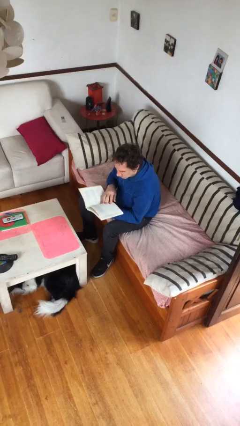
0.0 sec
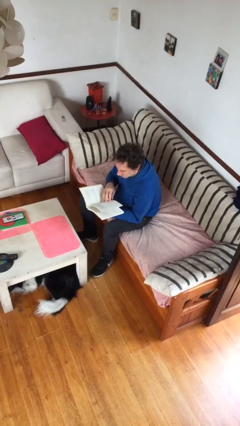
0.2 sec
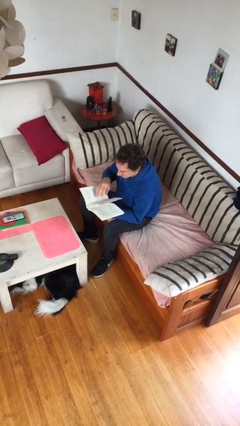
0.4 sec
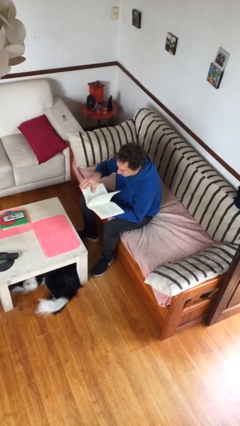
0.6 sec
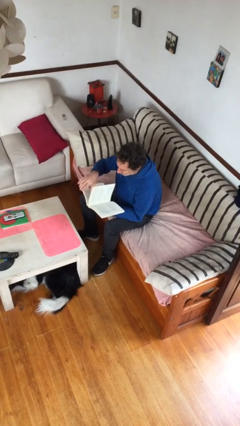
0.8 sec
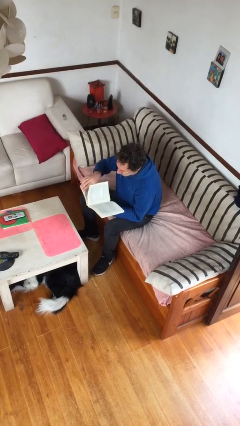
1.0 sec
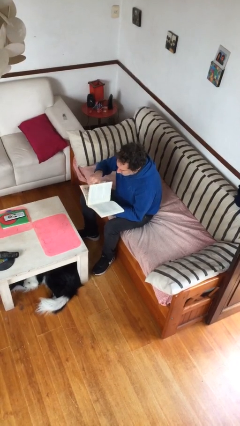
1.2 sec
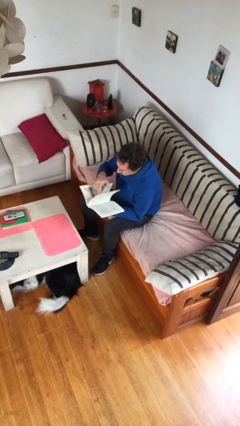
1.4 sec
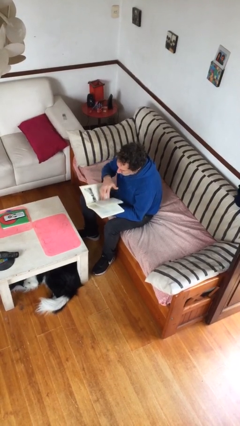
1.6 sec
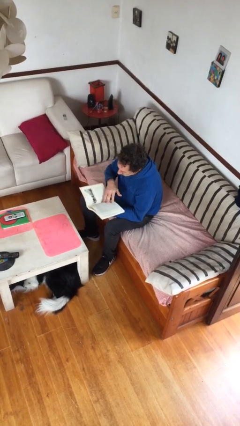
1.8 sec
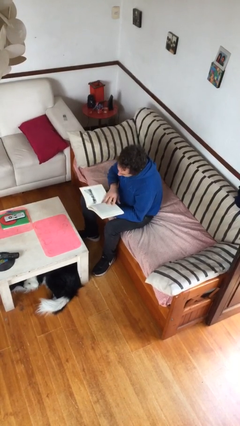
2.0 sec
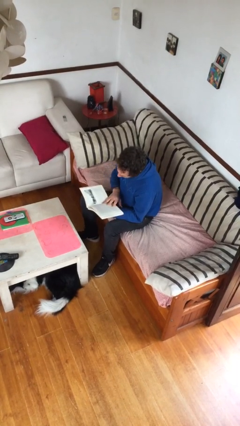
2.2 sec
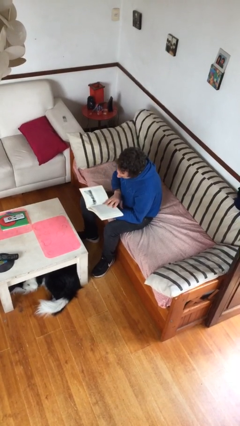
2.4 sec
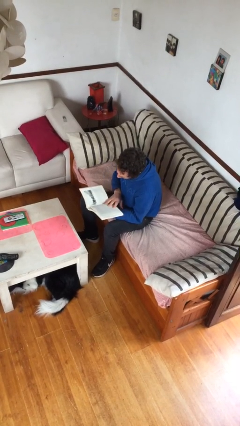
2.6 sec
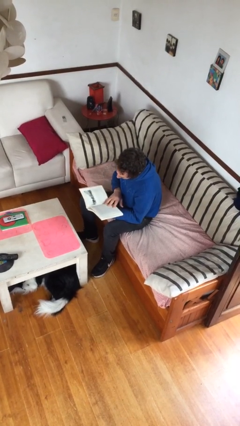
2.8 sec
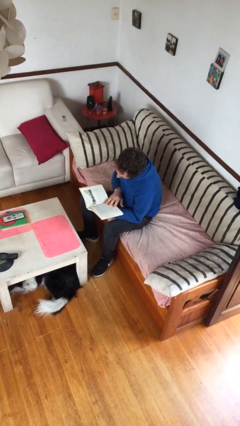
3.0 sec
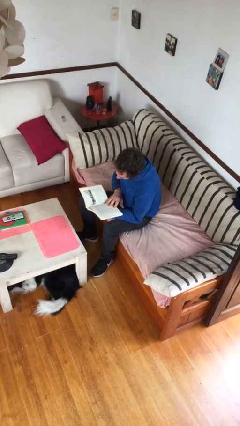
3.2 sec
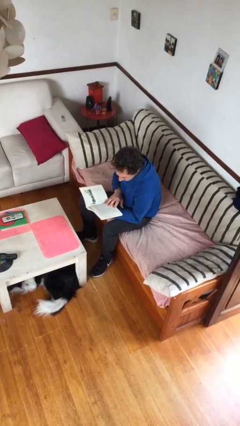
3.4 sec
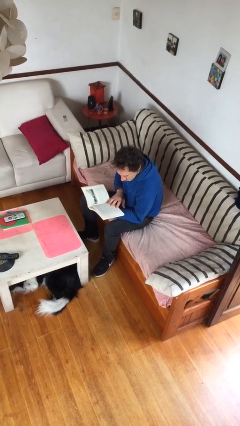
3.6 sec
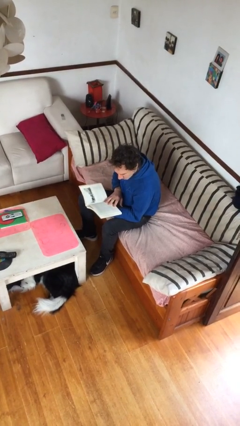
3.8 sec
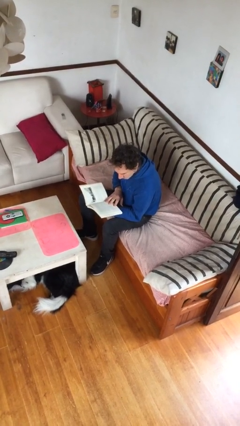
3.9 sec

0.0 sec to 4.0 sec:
person reads document

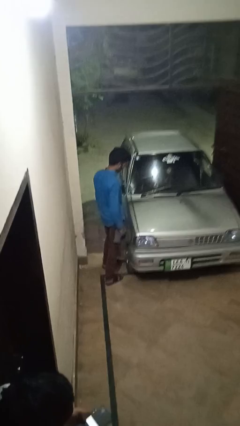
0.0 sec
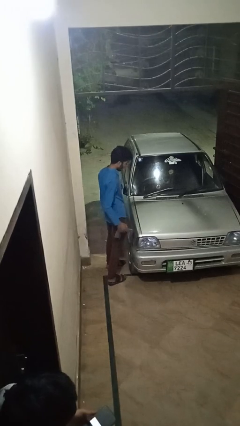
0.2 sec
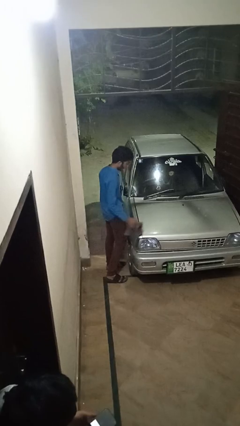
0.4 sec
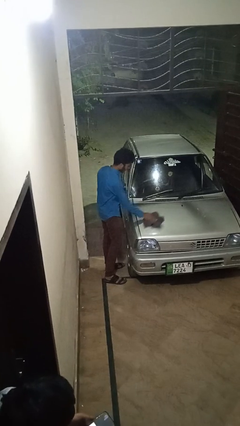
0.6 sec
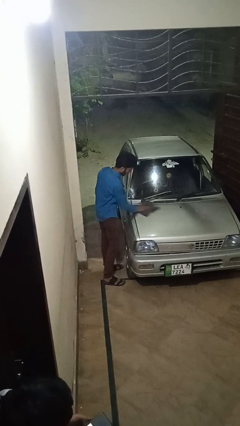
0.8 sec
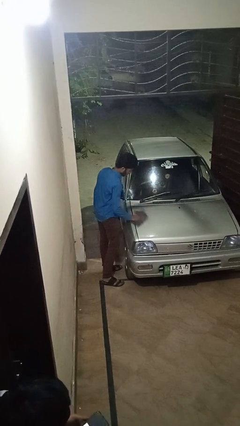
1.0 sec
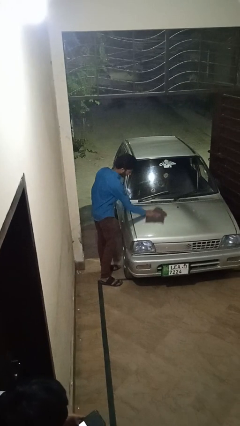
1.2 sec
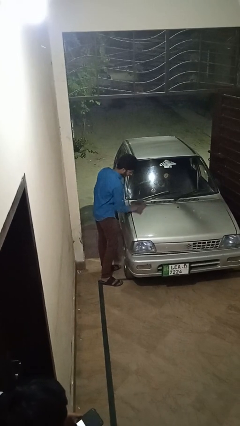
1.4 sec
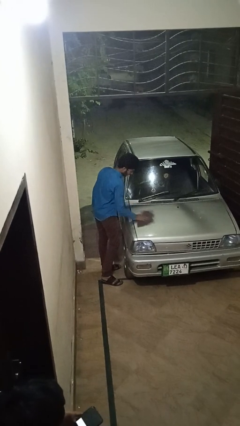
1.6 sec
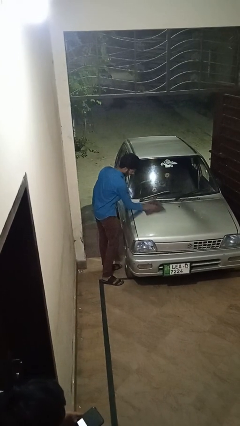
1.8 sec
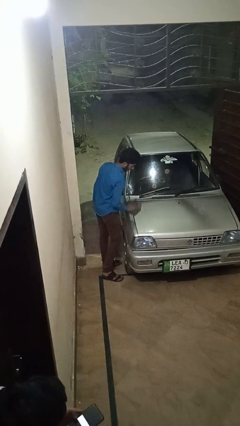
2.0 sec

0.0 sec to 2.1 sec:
person polishes car with rag

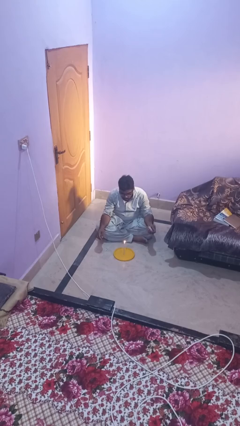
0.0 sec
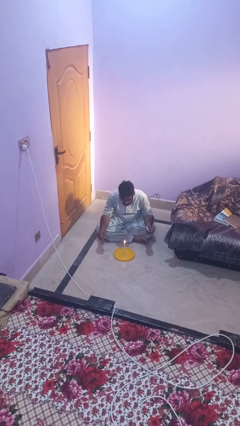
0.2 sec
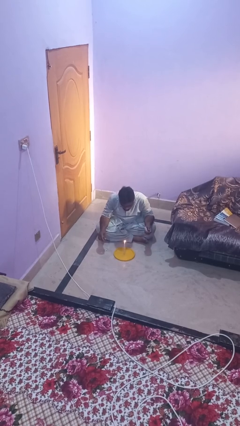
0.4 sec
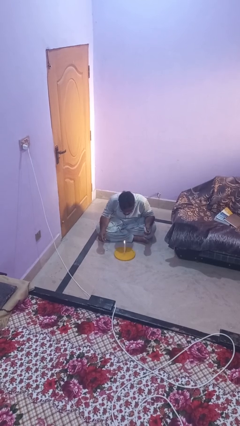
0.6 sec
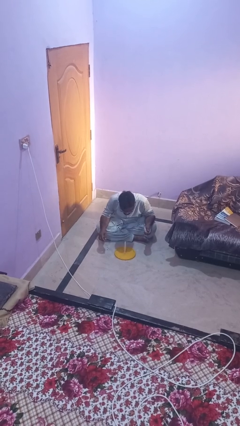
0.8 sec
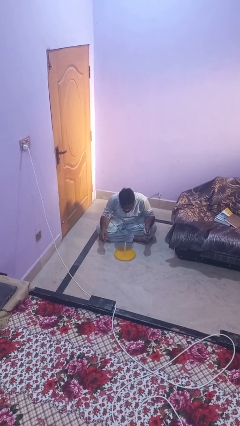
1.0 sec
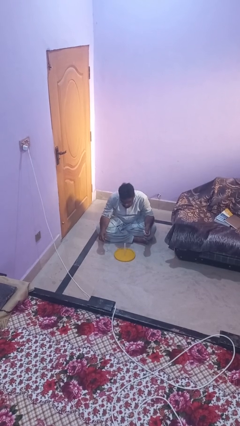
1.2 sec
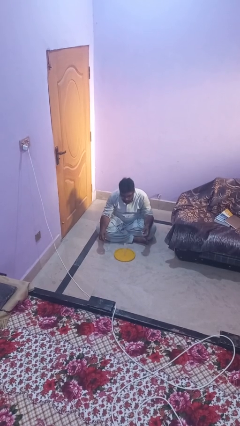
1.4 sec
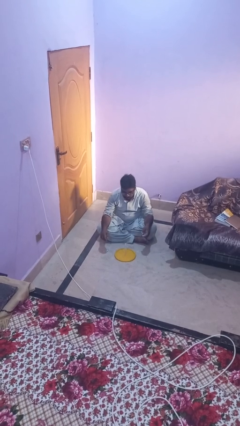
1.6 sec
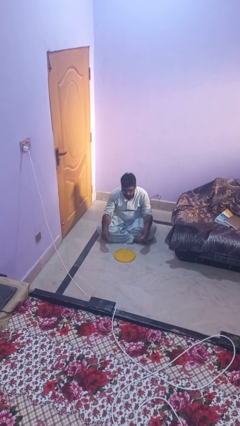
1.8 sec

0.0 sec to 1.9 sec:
person extinguishes candle

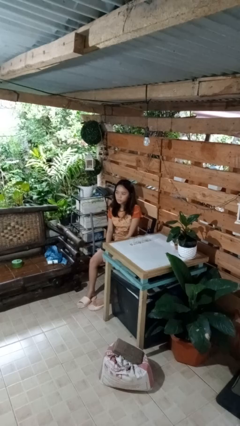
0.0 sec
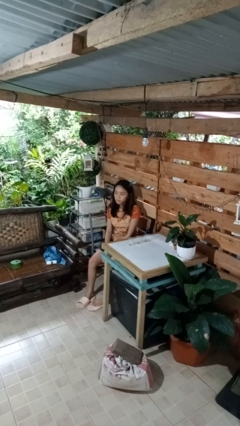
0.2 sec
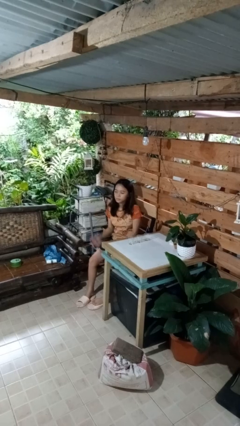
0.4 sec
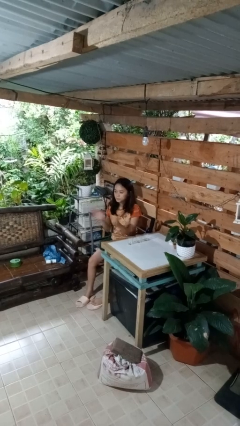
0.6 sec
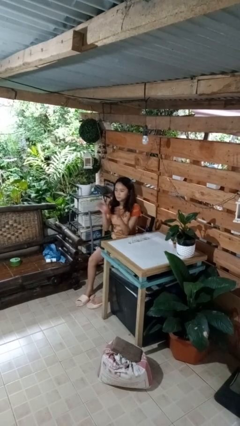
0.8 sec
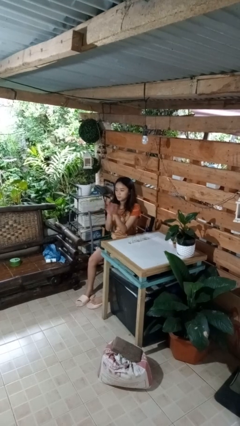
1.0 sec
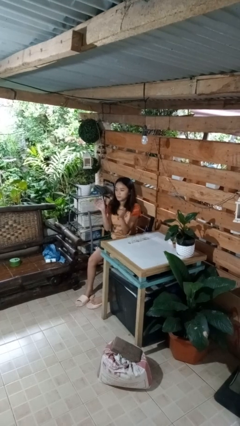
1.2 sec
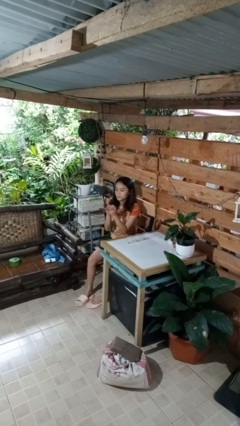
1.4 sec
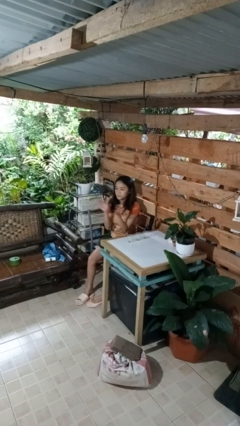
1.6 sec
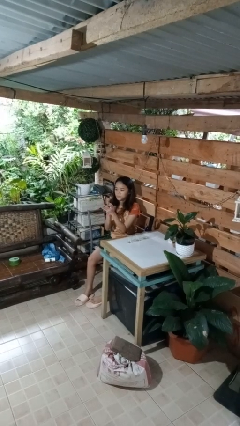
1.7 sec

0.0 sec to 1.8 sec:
person claps hands

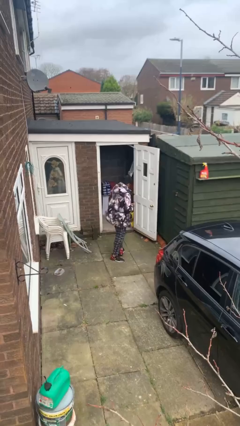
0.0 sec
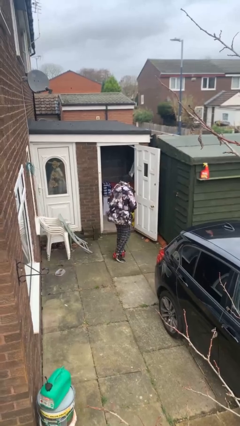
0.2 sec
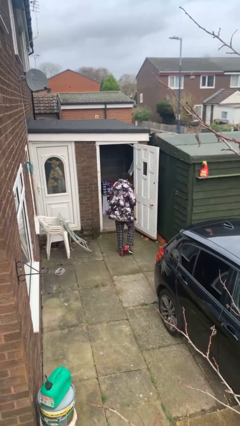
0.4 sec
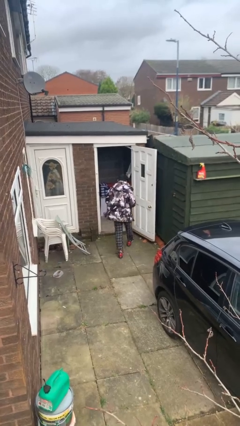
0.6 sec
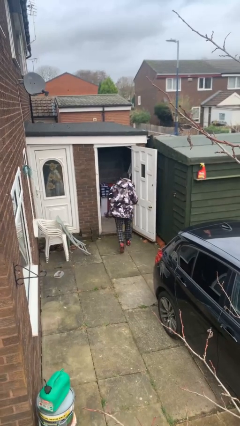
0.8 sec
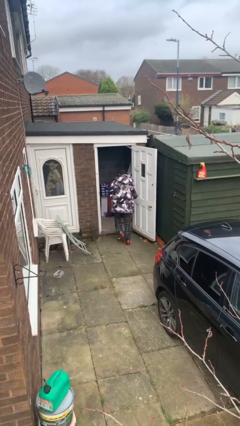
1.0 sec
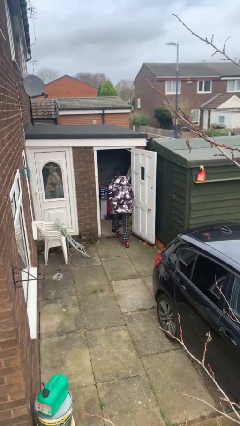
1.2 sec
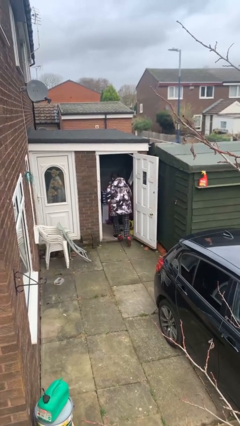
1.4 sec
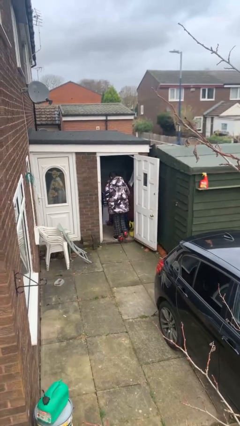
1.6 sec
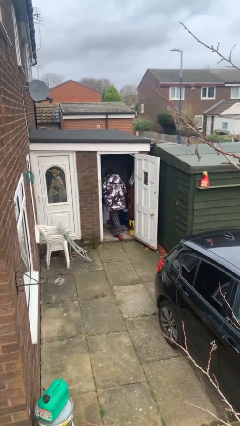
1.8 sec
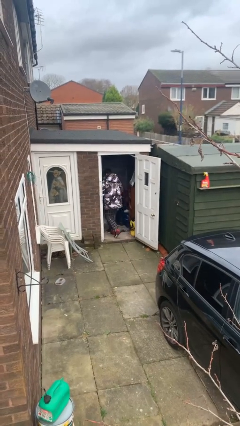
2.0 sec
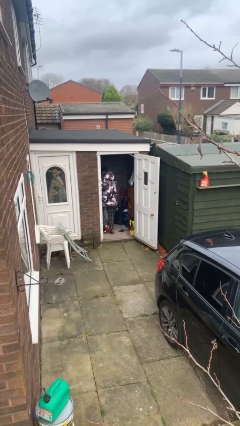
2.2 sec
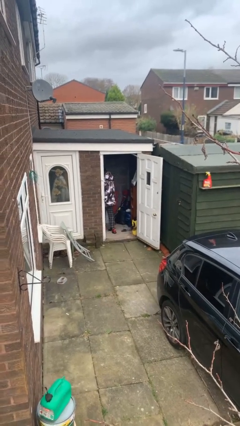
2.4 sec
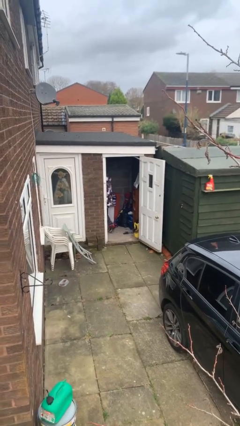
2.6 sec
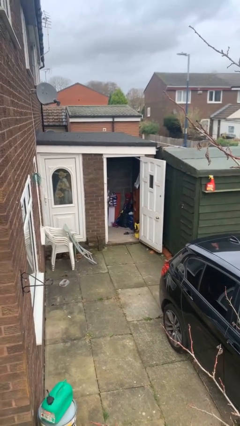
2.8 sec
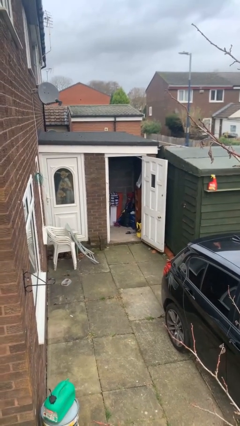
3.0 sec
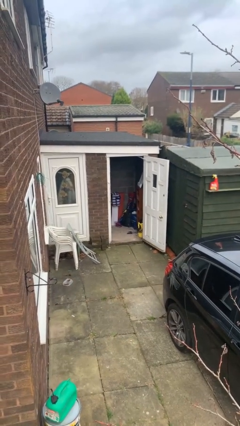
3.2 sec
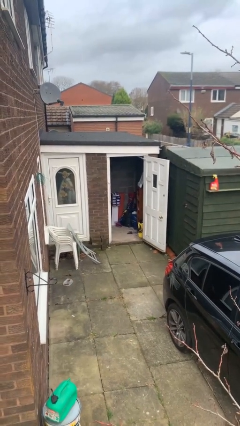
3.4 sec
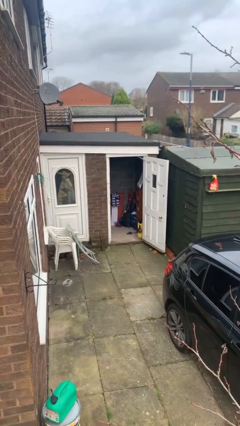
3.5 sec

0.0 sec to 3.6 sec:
person exits scene through structure

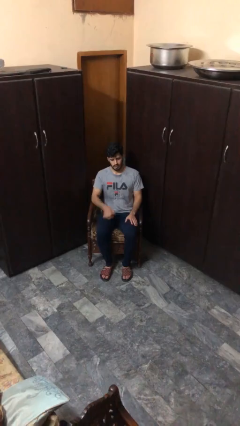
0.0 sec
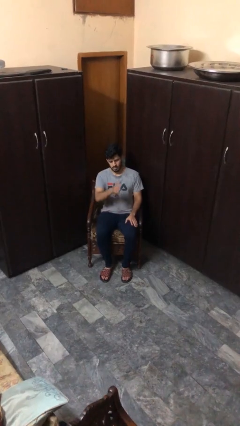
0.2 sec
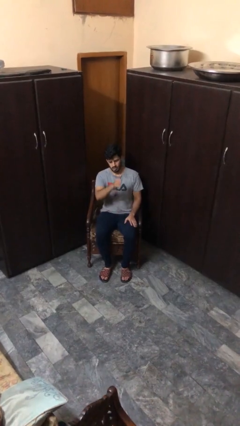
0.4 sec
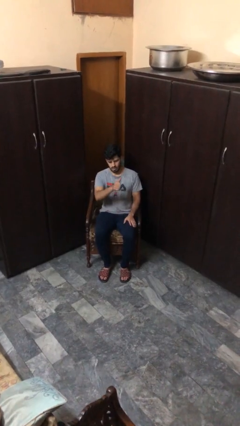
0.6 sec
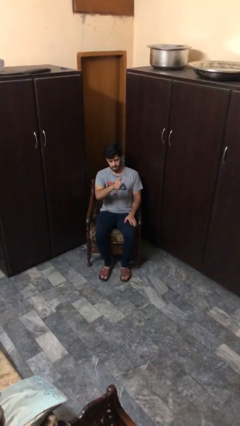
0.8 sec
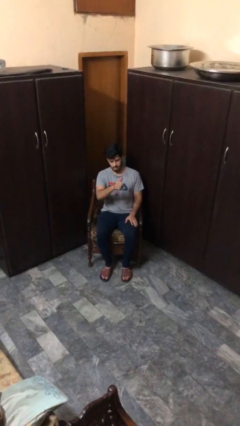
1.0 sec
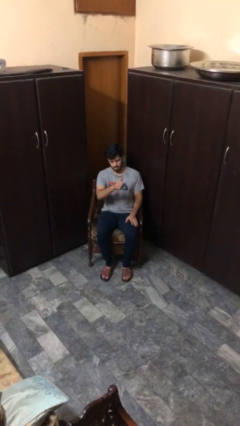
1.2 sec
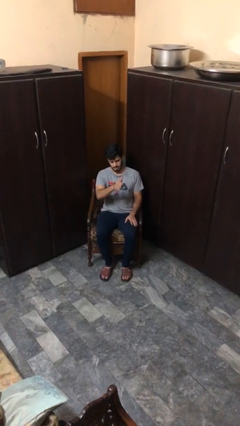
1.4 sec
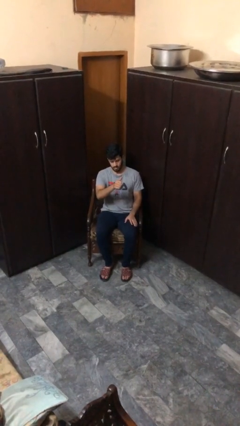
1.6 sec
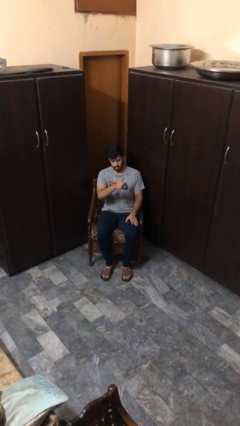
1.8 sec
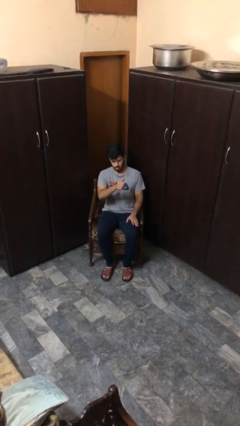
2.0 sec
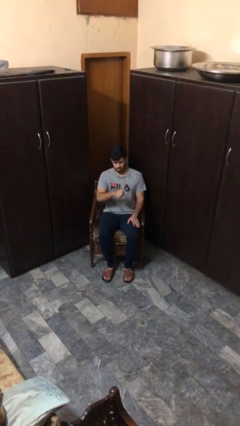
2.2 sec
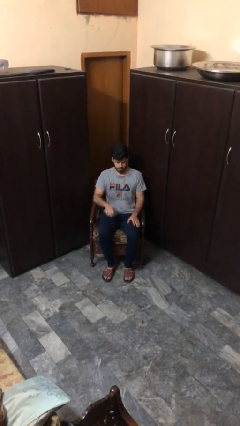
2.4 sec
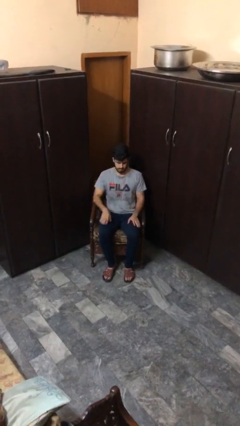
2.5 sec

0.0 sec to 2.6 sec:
person gestures thumbs up

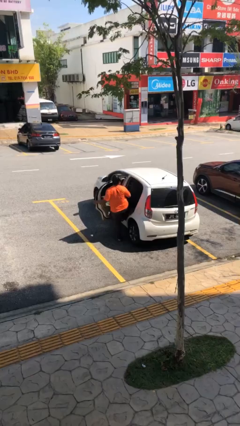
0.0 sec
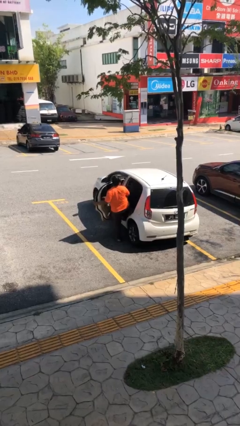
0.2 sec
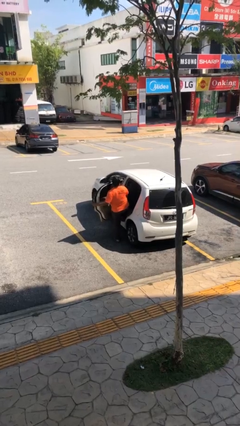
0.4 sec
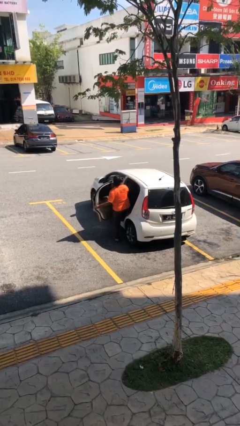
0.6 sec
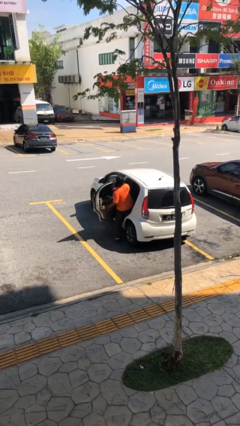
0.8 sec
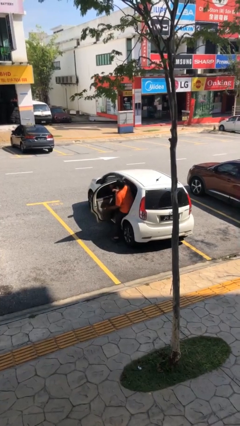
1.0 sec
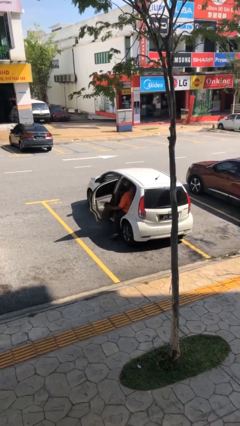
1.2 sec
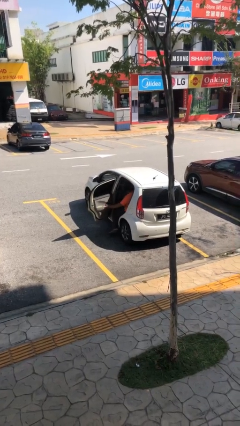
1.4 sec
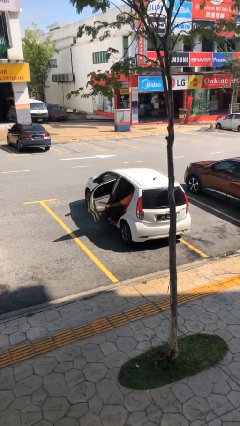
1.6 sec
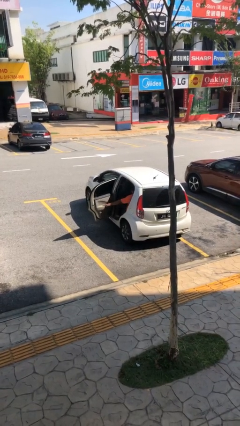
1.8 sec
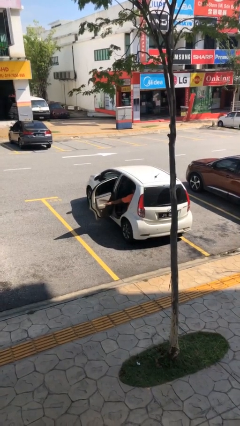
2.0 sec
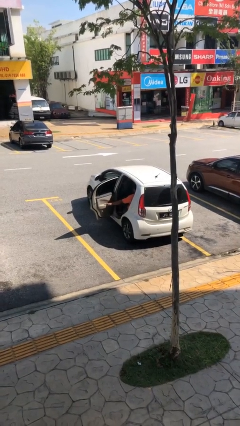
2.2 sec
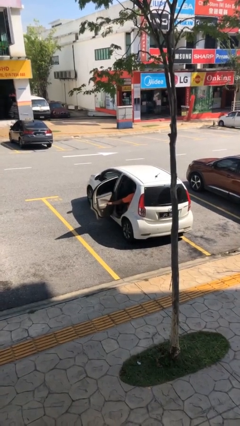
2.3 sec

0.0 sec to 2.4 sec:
person enters car
